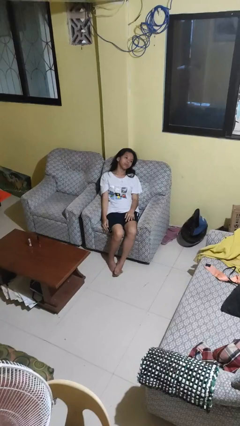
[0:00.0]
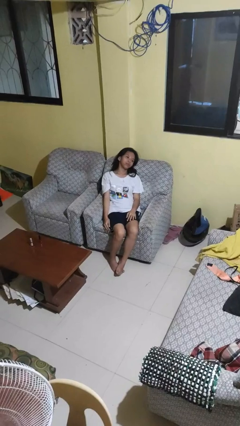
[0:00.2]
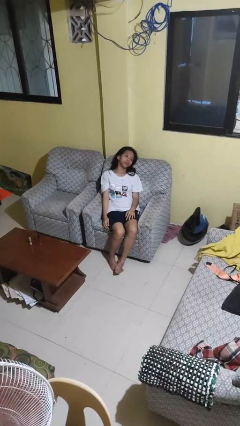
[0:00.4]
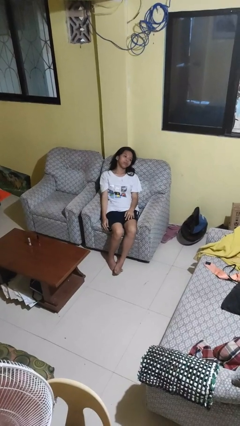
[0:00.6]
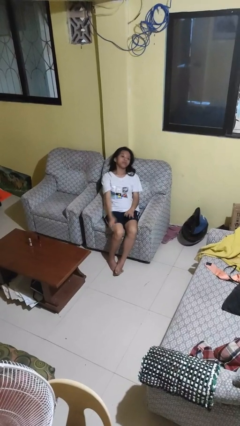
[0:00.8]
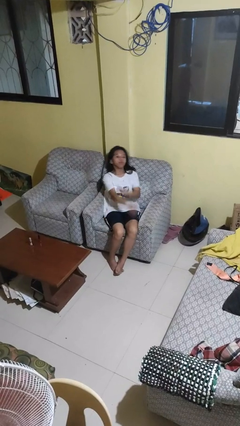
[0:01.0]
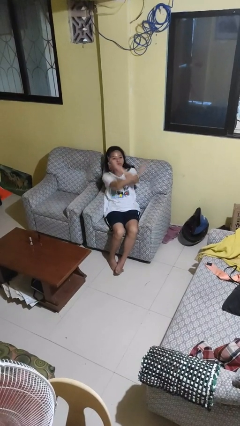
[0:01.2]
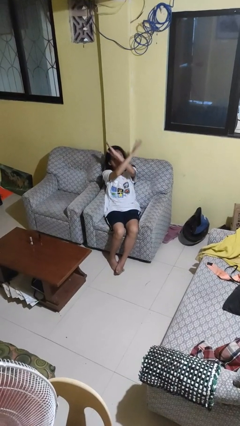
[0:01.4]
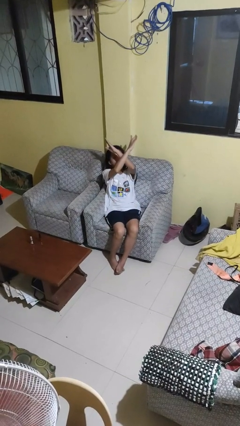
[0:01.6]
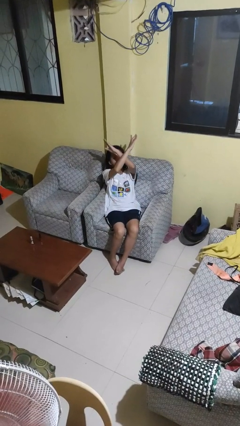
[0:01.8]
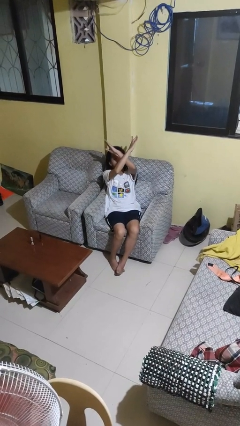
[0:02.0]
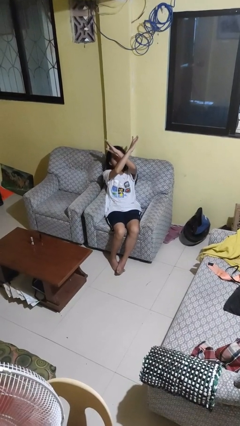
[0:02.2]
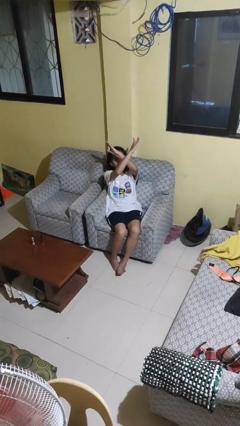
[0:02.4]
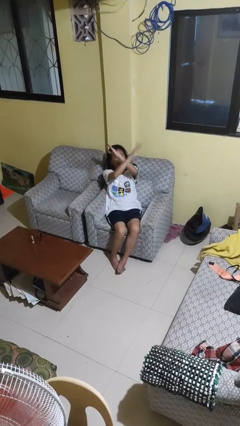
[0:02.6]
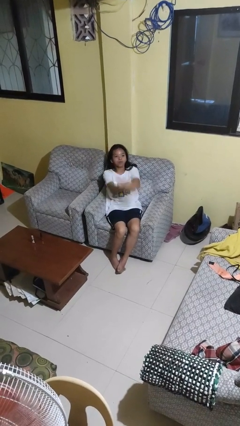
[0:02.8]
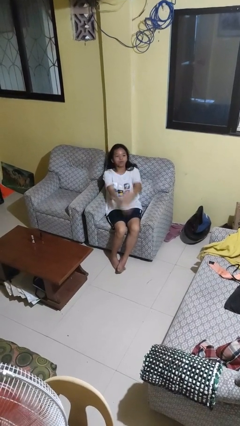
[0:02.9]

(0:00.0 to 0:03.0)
person gestures arms x

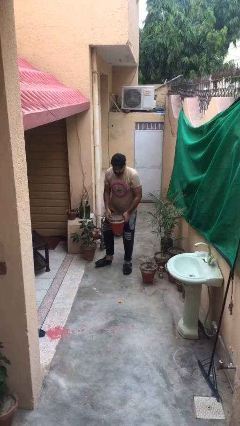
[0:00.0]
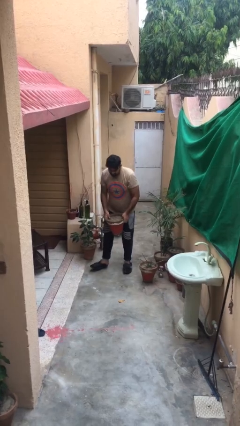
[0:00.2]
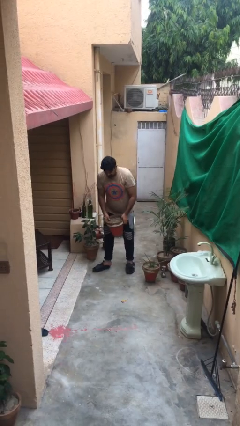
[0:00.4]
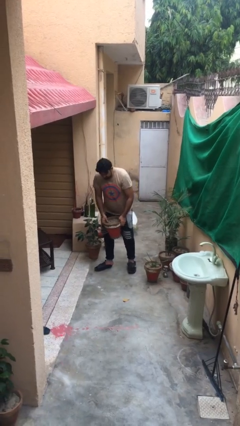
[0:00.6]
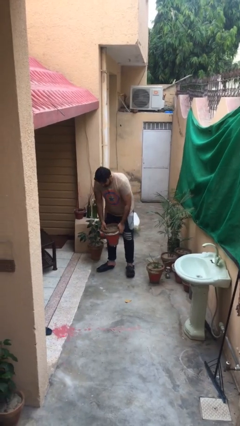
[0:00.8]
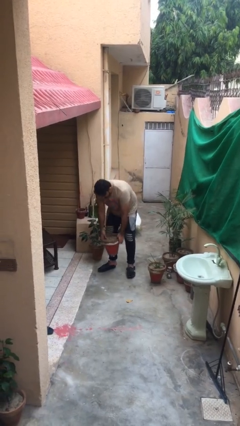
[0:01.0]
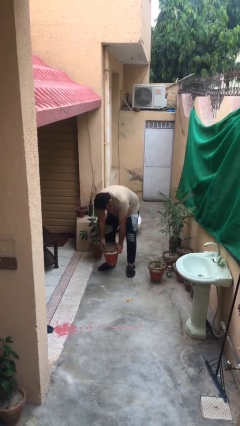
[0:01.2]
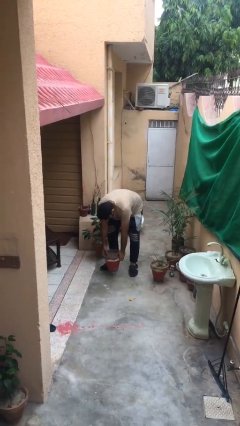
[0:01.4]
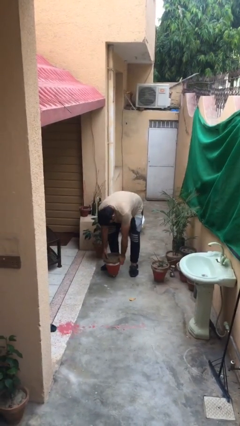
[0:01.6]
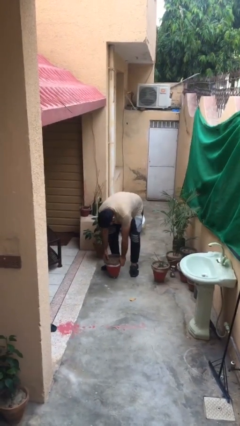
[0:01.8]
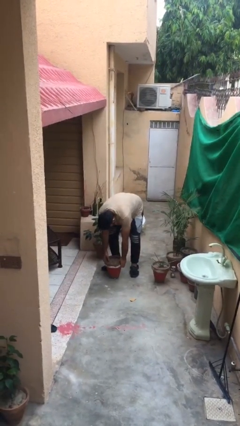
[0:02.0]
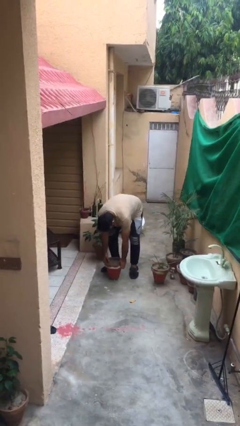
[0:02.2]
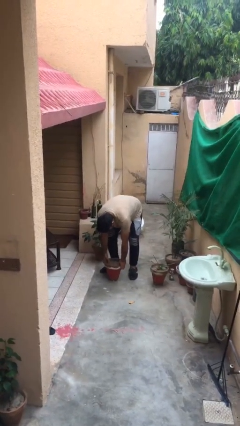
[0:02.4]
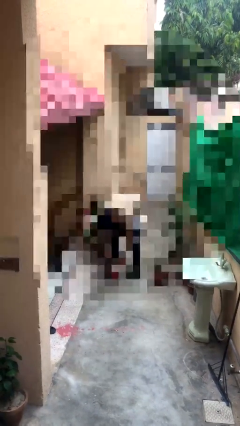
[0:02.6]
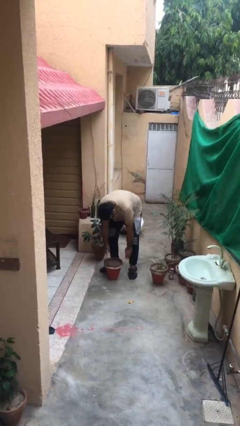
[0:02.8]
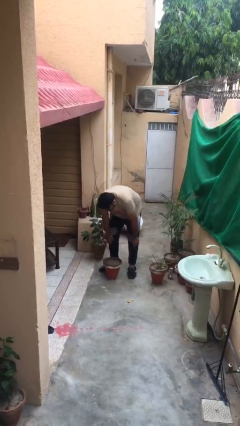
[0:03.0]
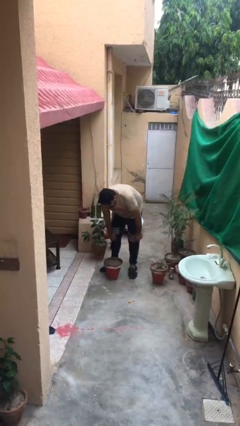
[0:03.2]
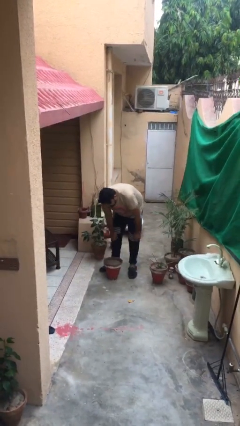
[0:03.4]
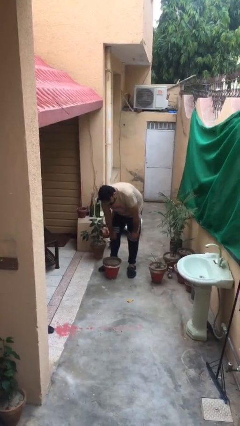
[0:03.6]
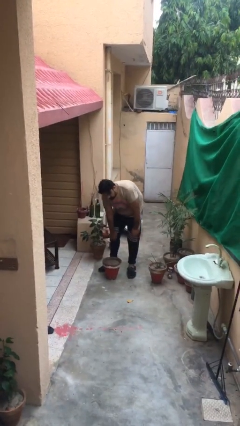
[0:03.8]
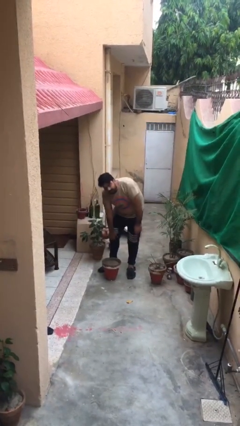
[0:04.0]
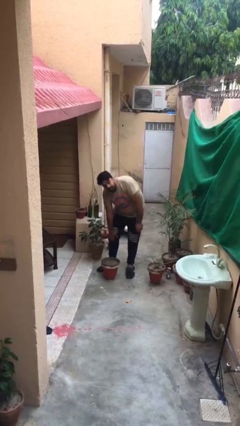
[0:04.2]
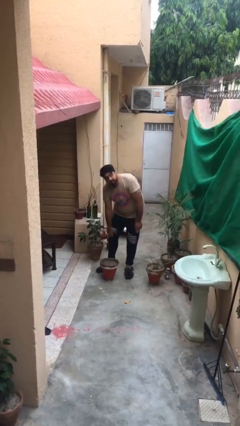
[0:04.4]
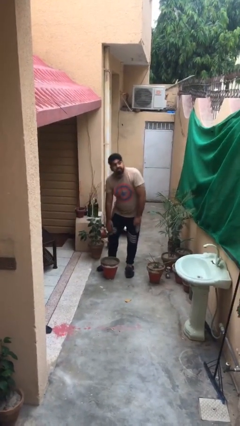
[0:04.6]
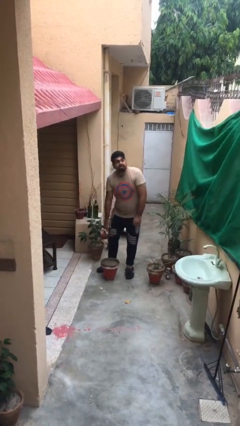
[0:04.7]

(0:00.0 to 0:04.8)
person puts down object on floor

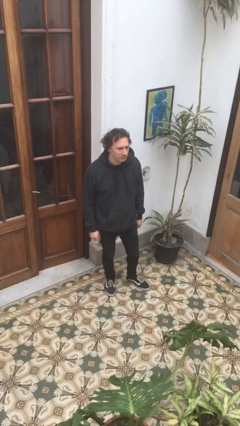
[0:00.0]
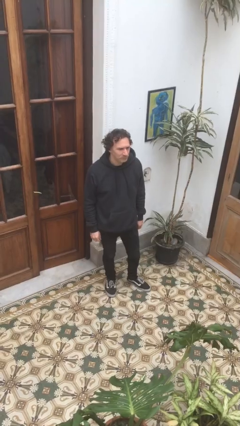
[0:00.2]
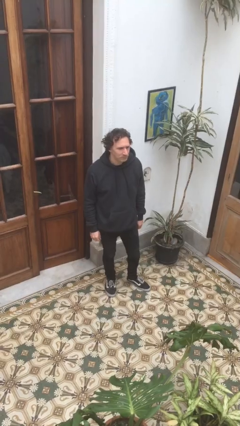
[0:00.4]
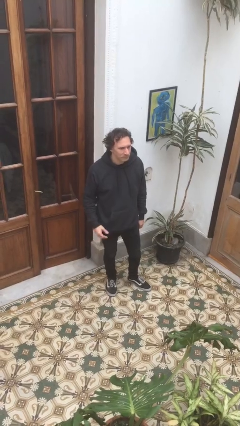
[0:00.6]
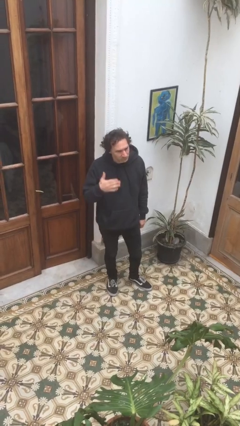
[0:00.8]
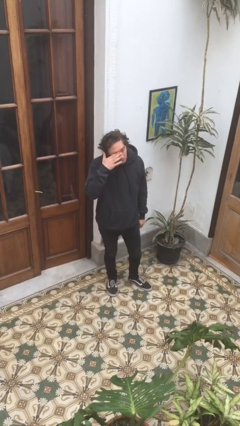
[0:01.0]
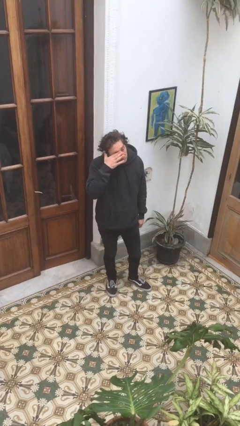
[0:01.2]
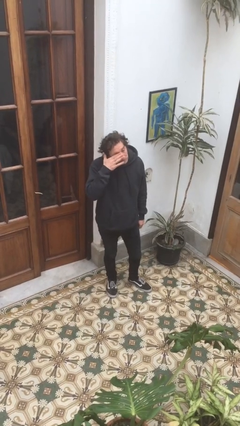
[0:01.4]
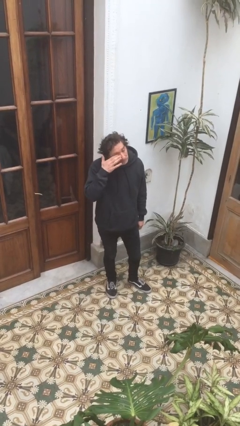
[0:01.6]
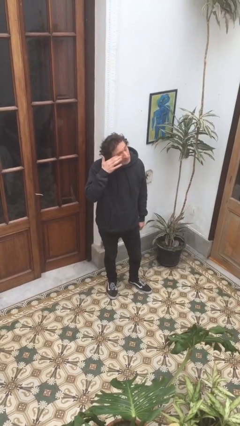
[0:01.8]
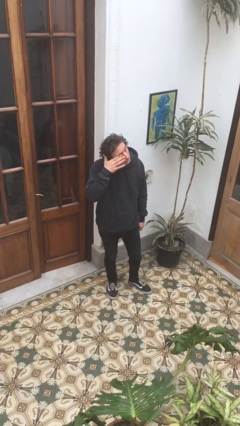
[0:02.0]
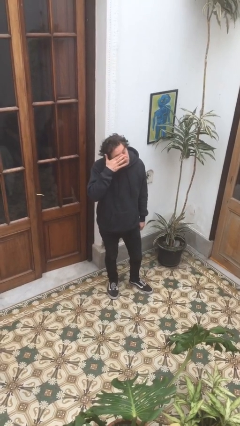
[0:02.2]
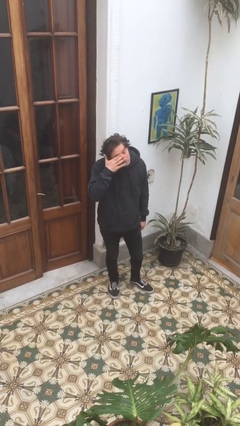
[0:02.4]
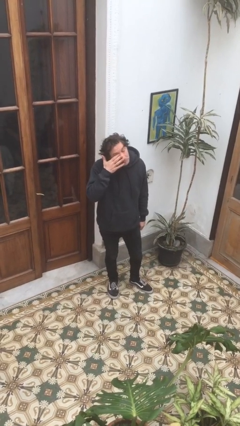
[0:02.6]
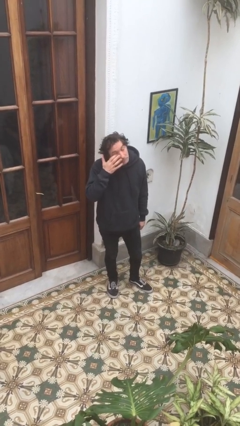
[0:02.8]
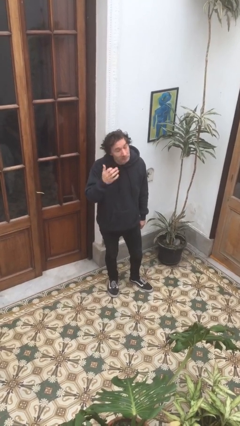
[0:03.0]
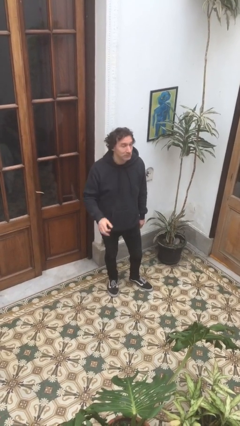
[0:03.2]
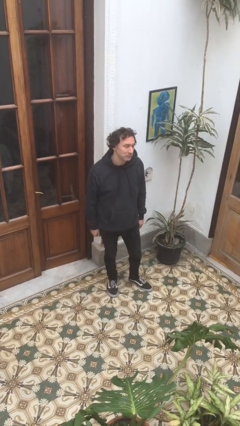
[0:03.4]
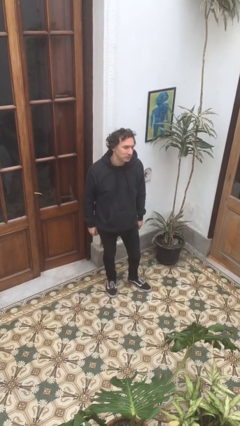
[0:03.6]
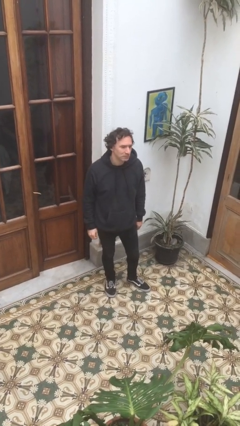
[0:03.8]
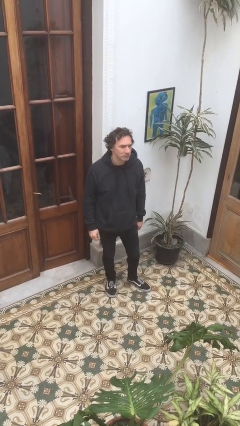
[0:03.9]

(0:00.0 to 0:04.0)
person rubs eyes

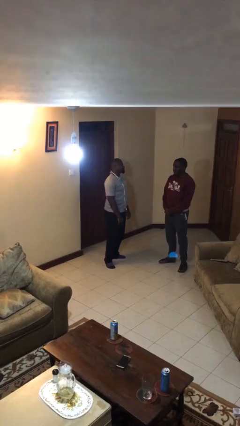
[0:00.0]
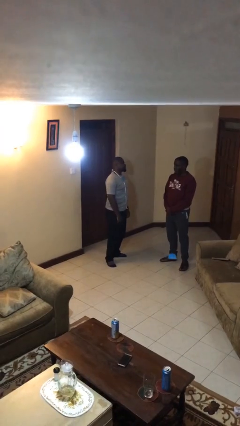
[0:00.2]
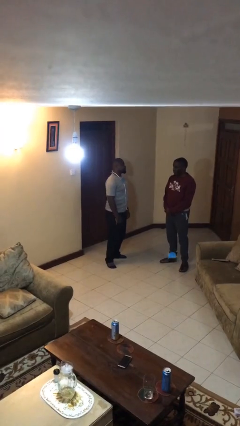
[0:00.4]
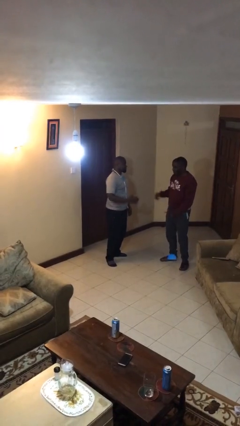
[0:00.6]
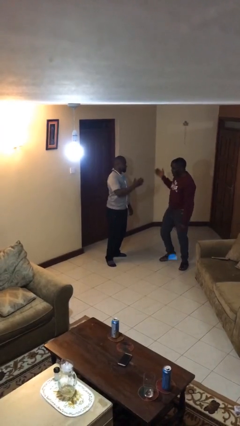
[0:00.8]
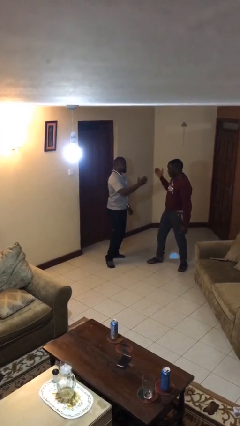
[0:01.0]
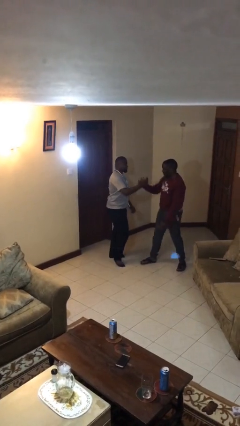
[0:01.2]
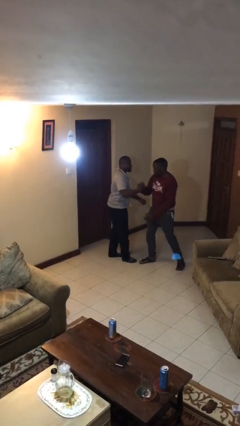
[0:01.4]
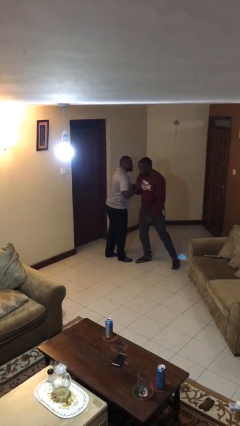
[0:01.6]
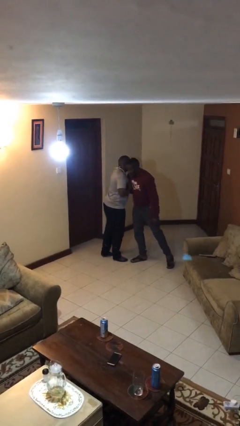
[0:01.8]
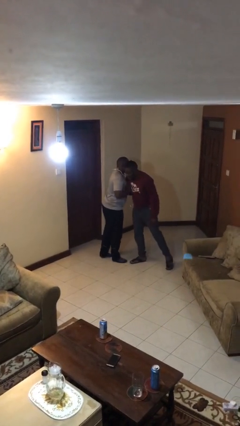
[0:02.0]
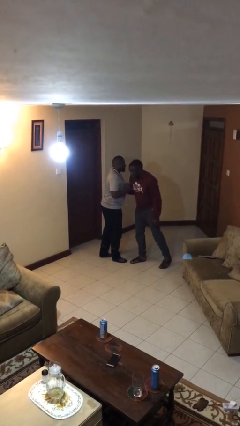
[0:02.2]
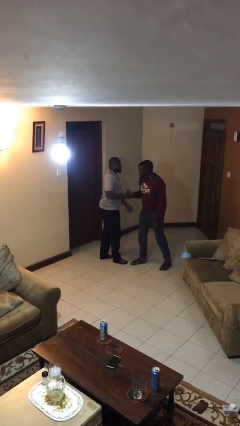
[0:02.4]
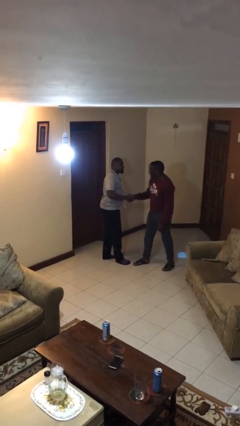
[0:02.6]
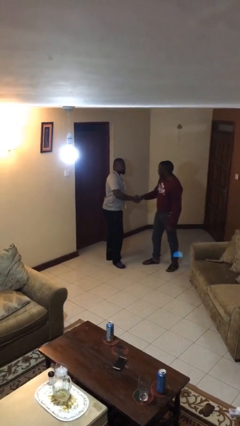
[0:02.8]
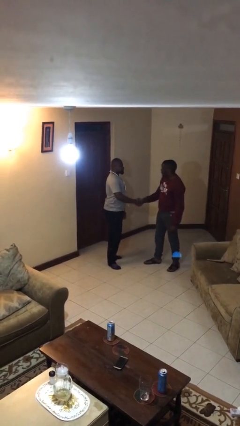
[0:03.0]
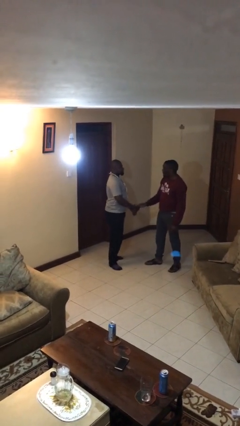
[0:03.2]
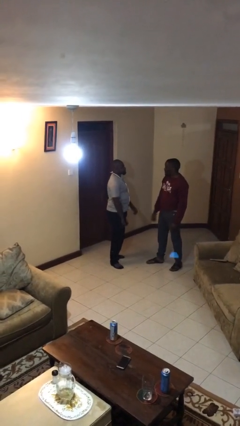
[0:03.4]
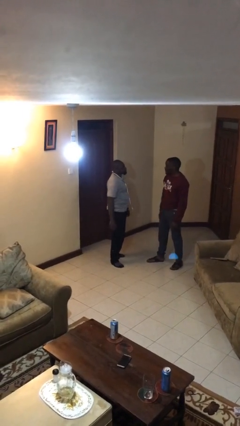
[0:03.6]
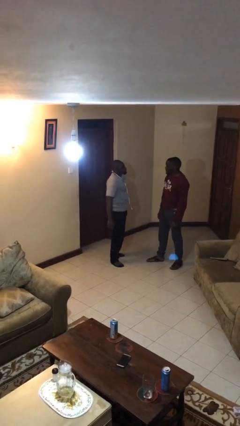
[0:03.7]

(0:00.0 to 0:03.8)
person embraces person

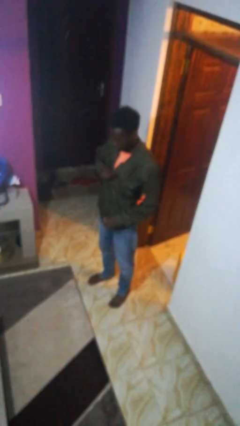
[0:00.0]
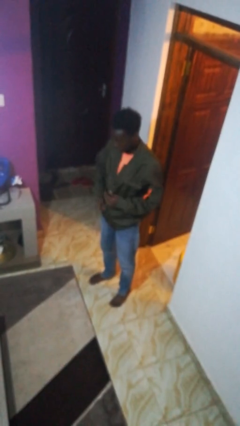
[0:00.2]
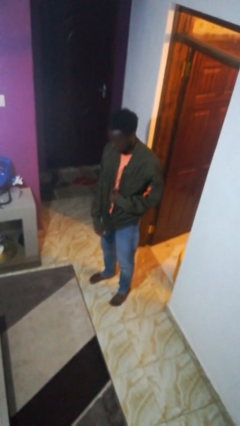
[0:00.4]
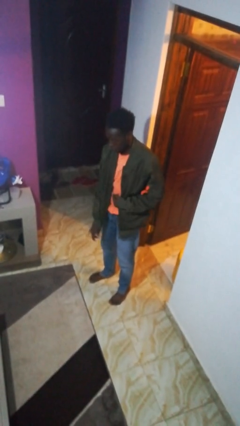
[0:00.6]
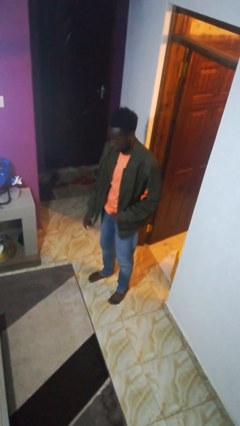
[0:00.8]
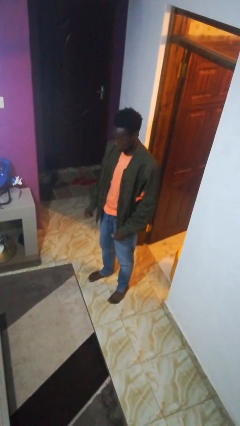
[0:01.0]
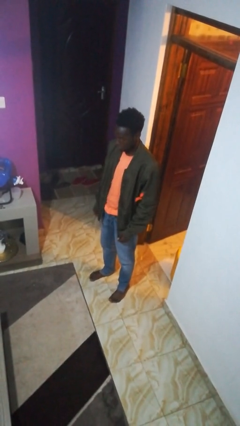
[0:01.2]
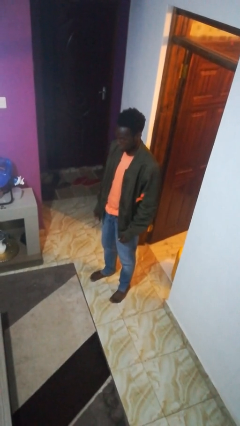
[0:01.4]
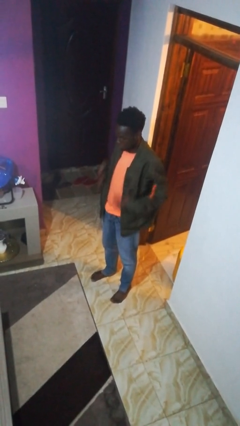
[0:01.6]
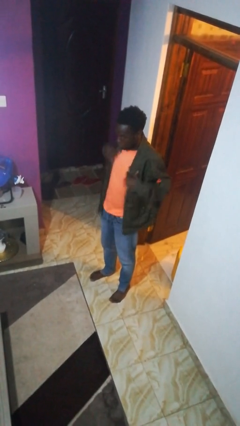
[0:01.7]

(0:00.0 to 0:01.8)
person unzips jacket

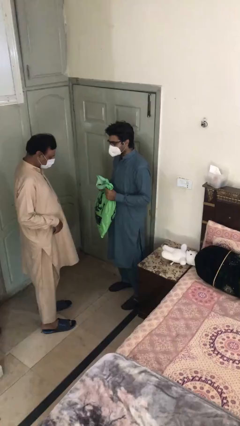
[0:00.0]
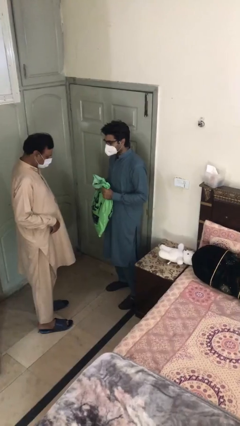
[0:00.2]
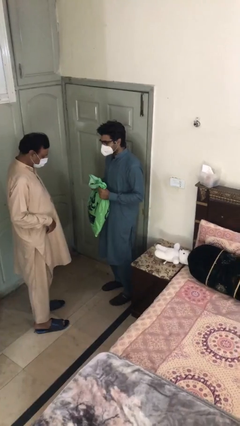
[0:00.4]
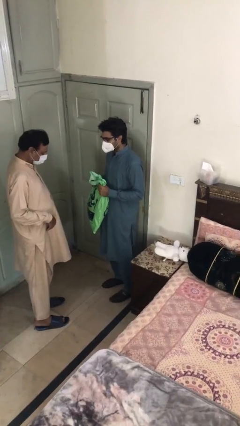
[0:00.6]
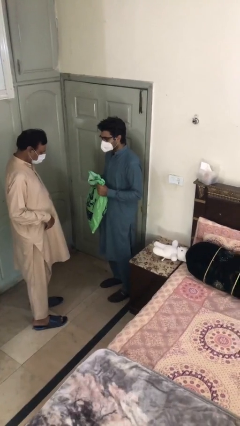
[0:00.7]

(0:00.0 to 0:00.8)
person transfers object to person
